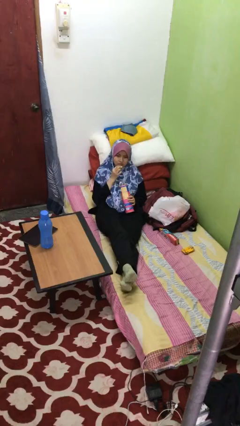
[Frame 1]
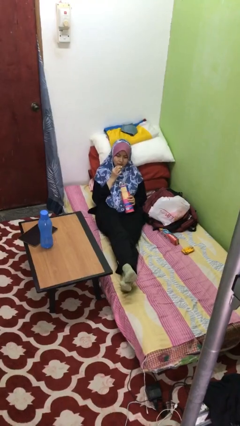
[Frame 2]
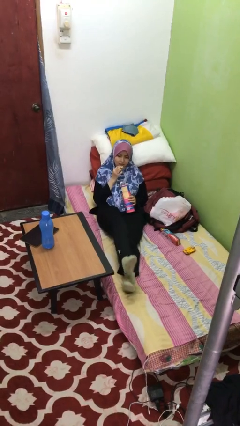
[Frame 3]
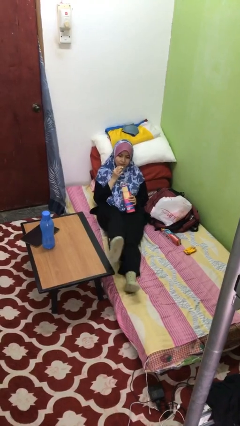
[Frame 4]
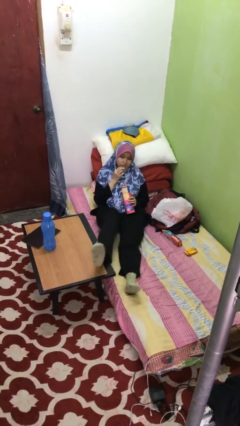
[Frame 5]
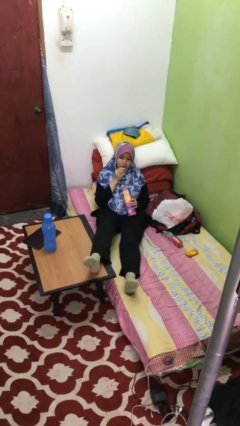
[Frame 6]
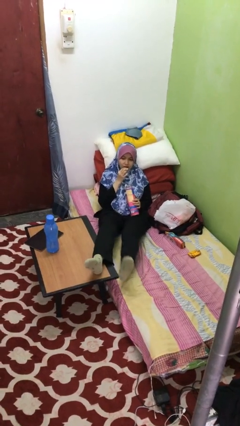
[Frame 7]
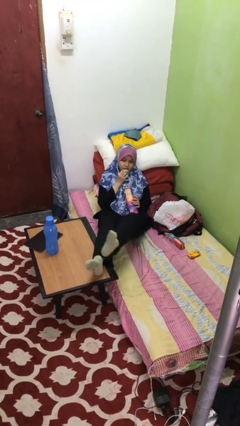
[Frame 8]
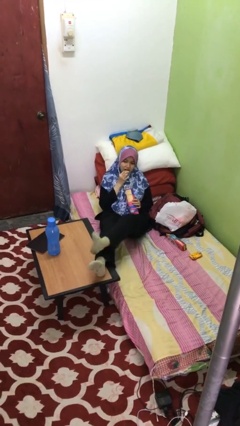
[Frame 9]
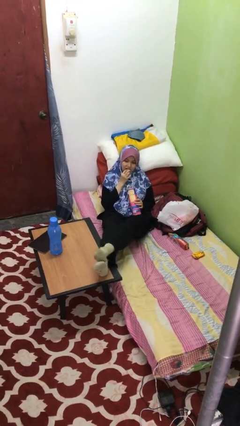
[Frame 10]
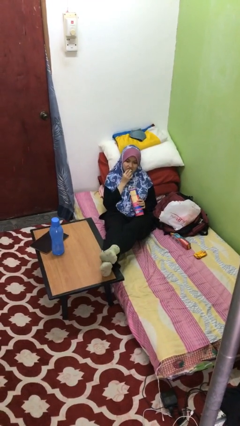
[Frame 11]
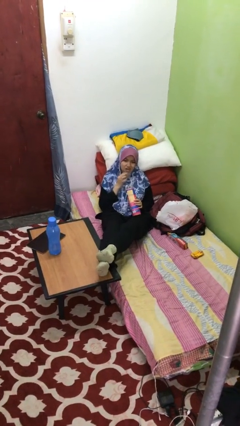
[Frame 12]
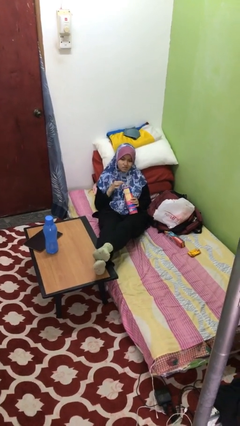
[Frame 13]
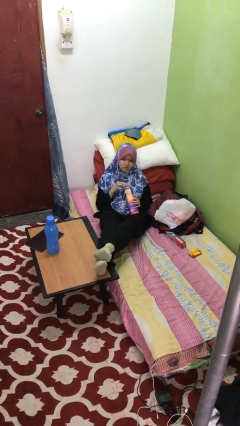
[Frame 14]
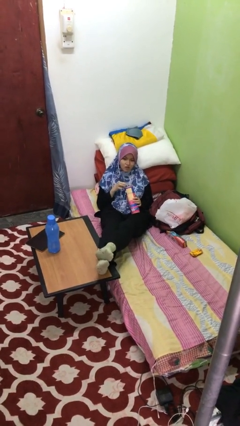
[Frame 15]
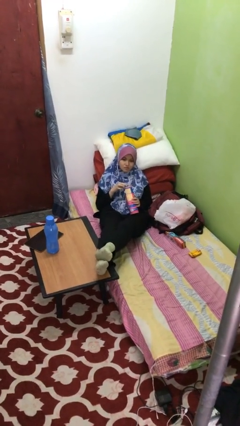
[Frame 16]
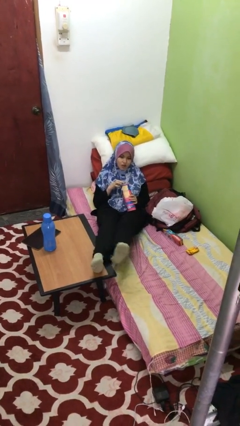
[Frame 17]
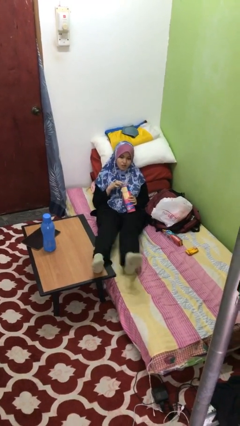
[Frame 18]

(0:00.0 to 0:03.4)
person puts feet up

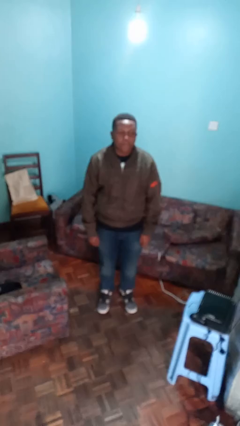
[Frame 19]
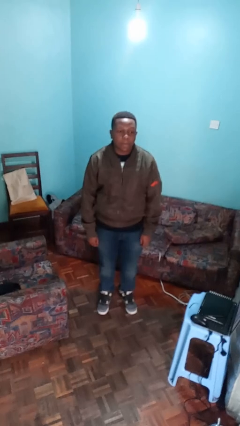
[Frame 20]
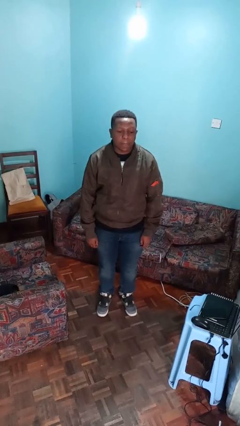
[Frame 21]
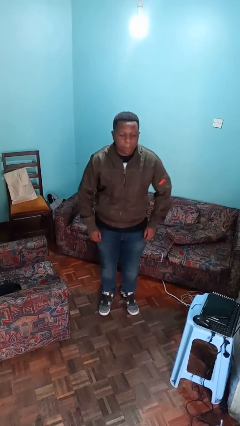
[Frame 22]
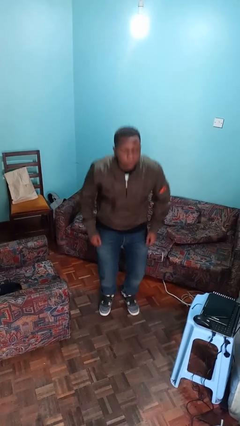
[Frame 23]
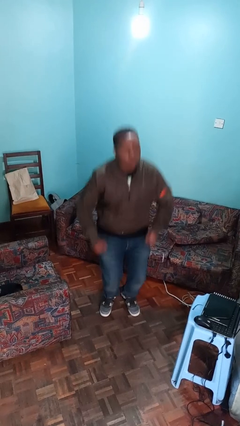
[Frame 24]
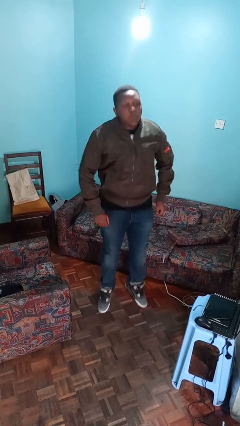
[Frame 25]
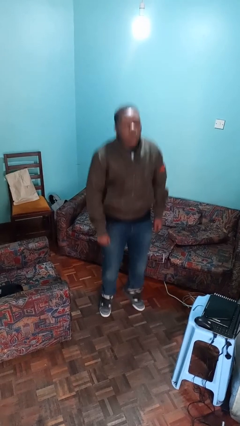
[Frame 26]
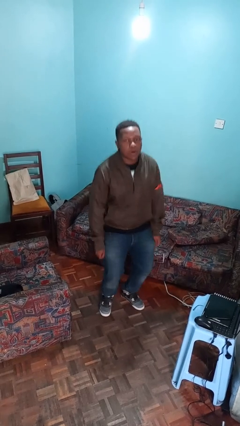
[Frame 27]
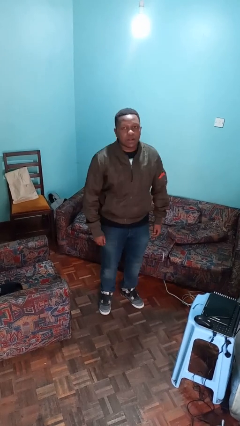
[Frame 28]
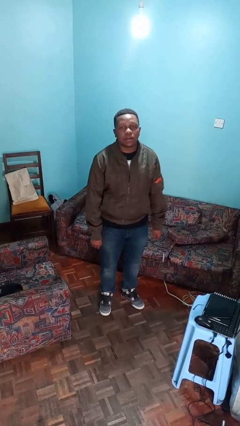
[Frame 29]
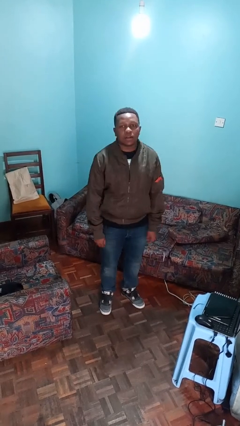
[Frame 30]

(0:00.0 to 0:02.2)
person jumps

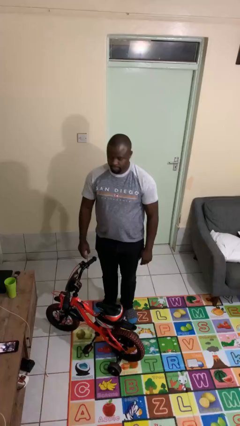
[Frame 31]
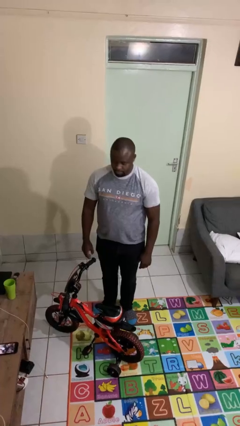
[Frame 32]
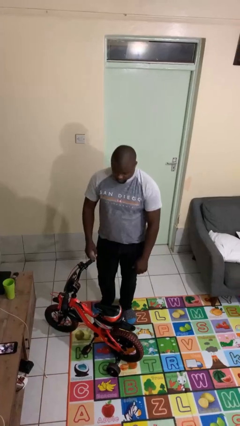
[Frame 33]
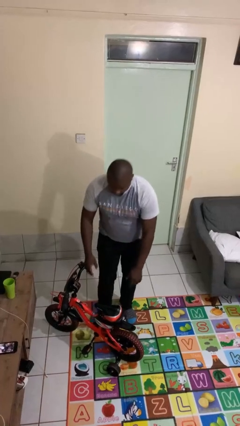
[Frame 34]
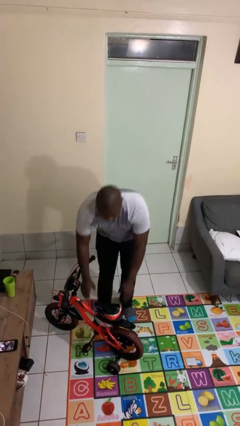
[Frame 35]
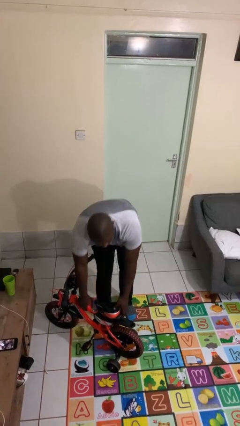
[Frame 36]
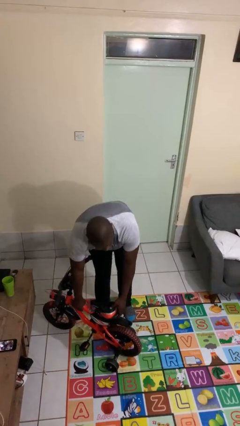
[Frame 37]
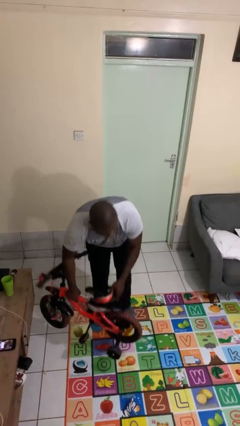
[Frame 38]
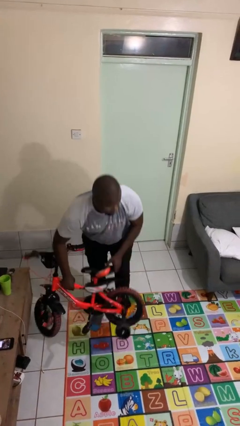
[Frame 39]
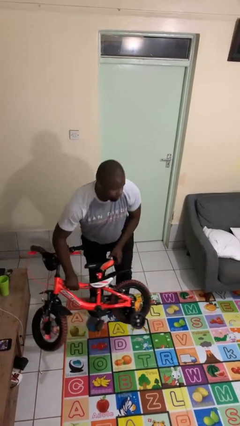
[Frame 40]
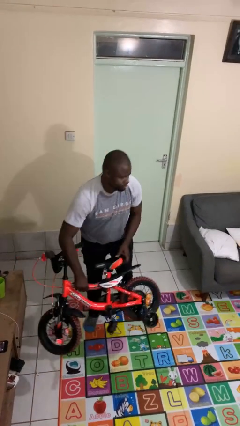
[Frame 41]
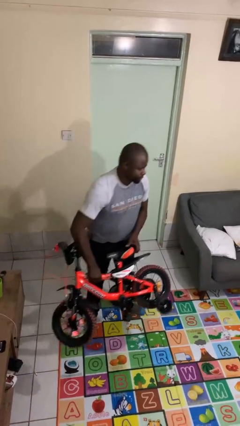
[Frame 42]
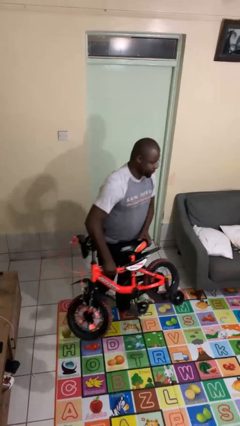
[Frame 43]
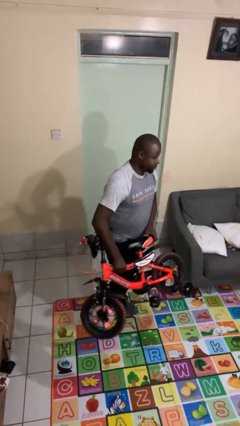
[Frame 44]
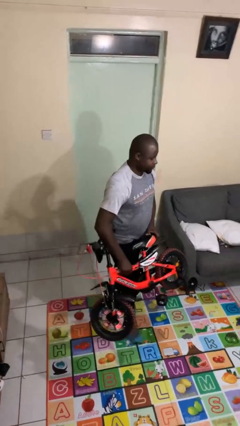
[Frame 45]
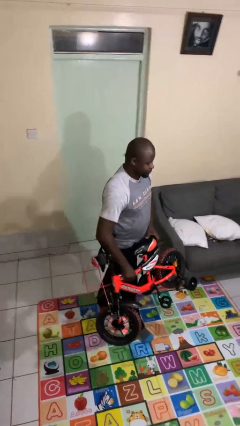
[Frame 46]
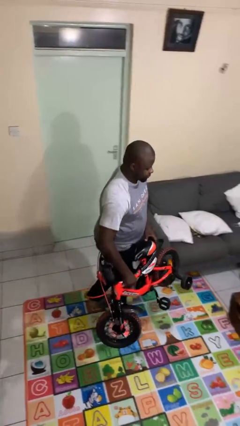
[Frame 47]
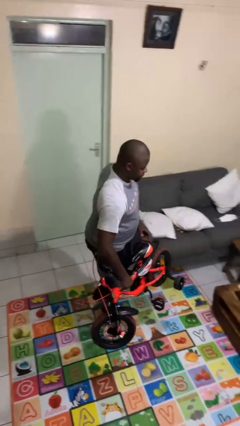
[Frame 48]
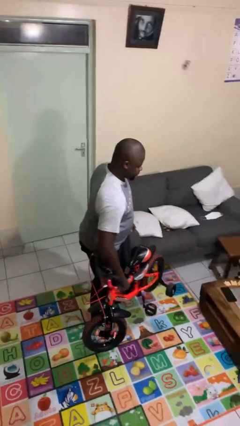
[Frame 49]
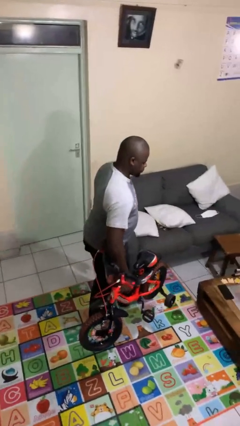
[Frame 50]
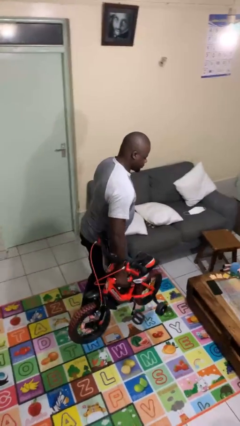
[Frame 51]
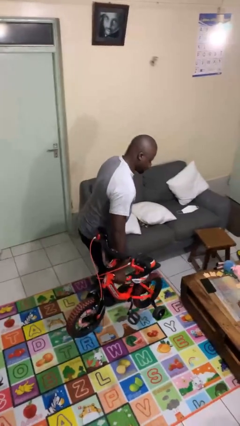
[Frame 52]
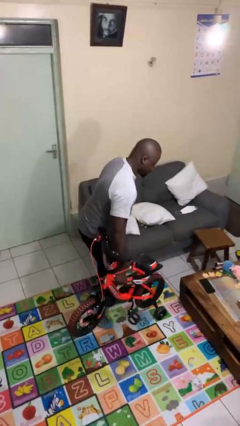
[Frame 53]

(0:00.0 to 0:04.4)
person carries bicycle

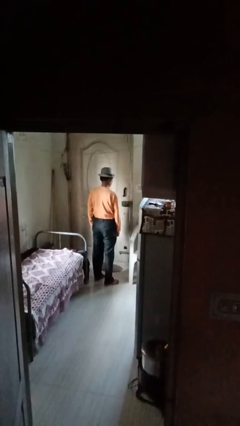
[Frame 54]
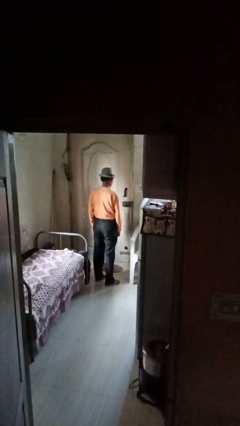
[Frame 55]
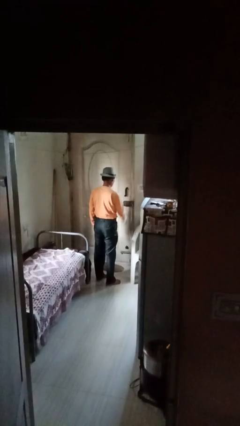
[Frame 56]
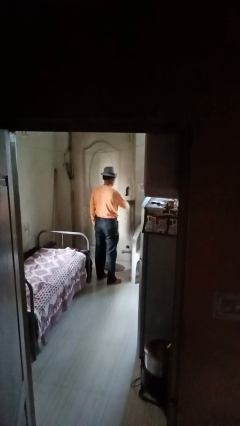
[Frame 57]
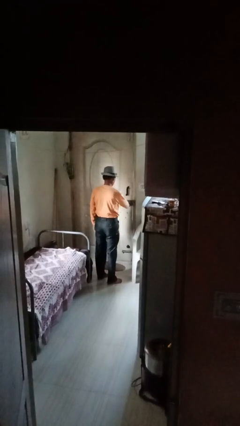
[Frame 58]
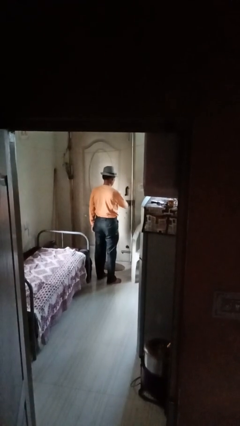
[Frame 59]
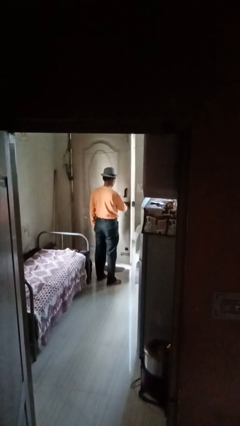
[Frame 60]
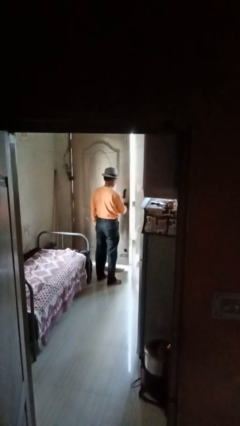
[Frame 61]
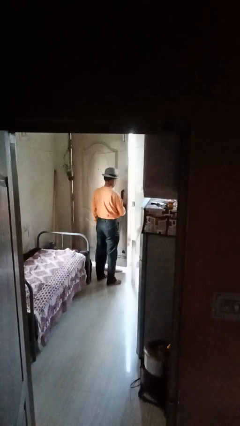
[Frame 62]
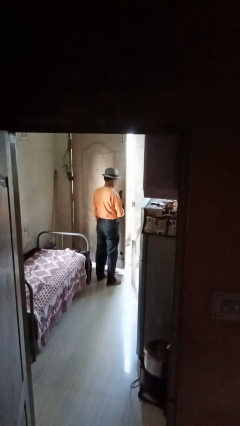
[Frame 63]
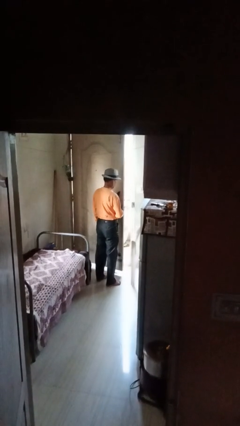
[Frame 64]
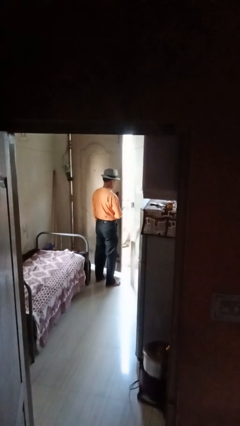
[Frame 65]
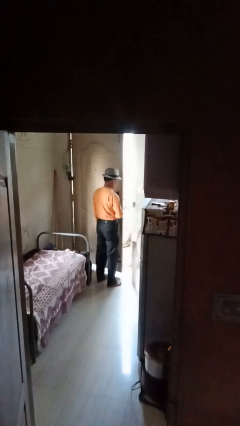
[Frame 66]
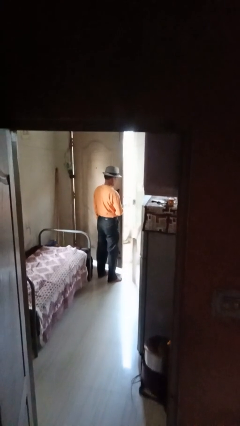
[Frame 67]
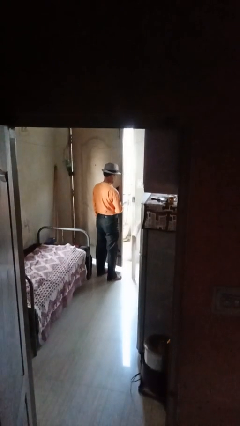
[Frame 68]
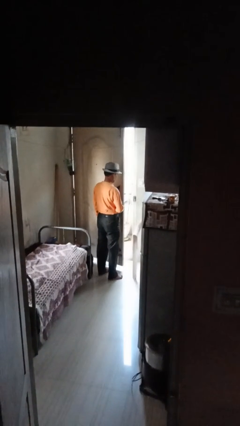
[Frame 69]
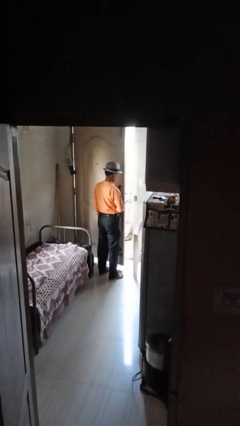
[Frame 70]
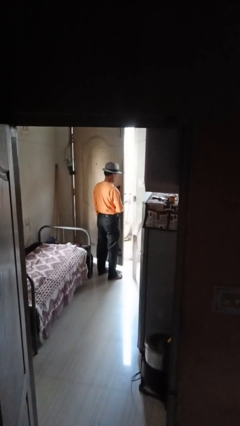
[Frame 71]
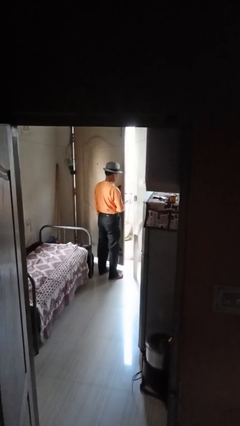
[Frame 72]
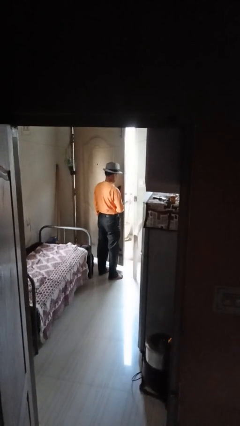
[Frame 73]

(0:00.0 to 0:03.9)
person opens facility door

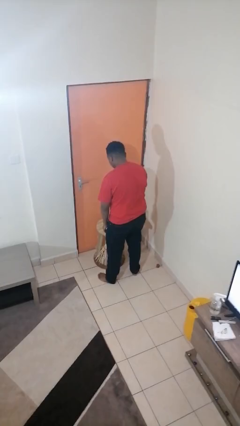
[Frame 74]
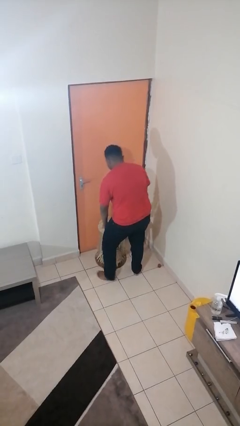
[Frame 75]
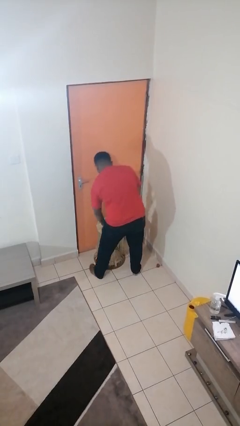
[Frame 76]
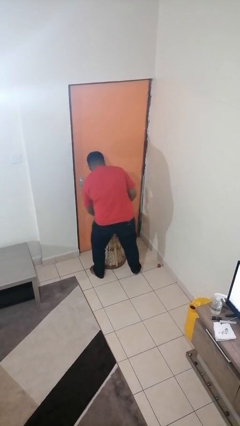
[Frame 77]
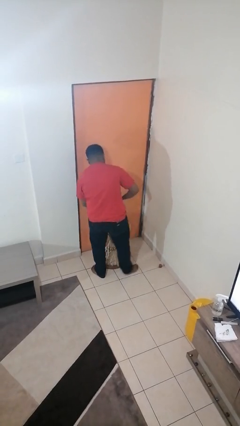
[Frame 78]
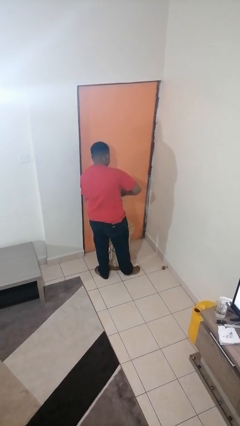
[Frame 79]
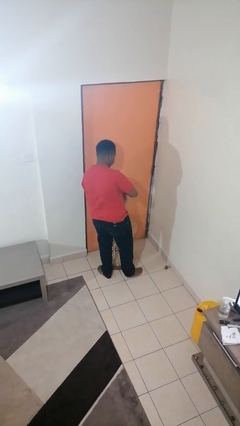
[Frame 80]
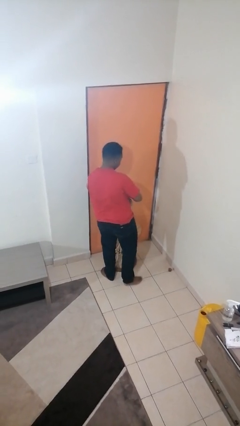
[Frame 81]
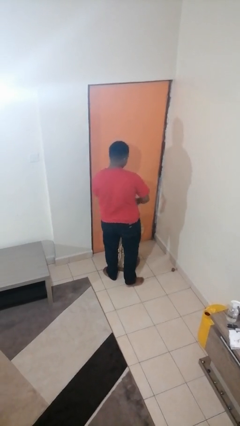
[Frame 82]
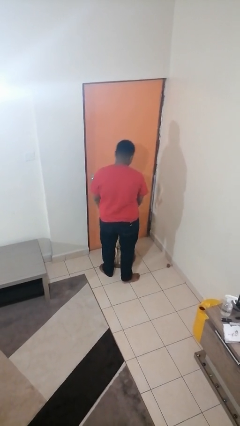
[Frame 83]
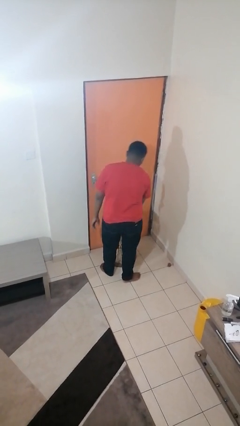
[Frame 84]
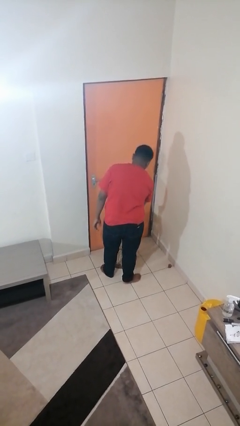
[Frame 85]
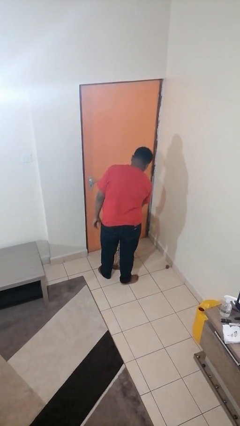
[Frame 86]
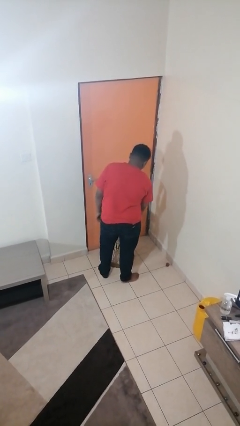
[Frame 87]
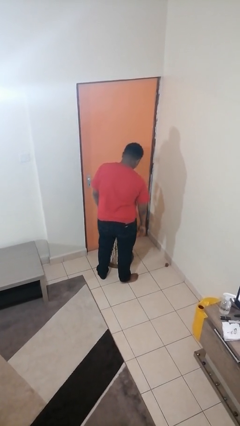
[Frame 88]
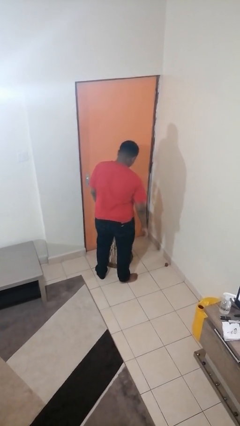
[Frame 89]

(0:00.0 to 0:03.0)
person closes jar

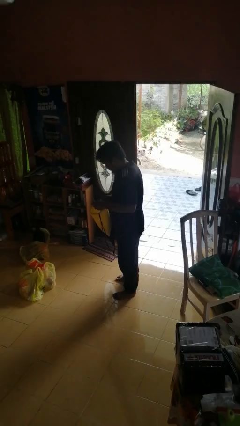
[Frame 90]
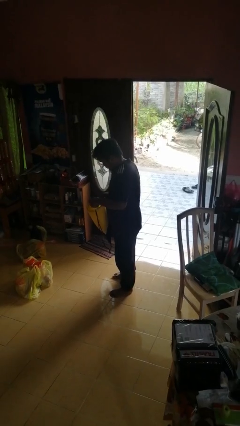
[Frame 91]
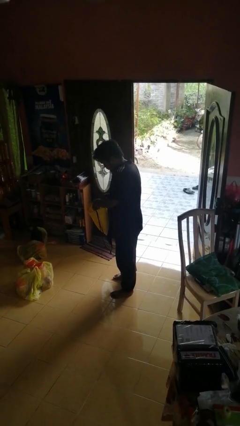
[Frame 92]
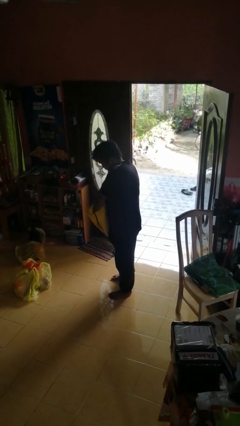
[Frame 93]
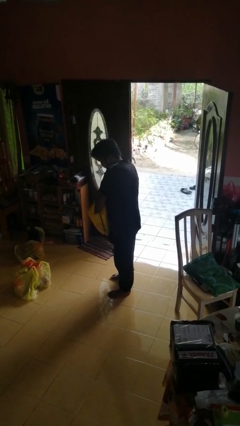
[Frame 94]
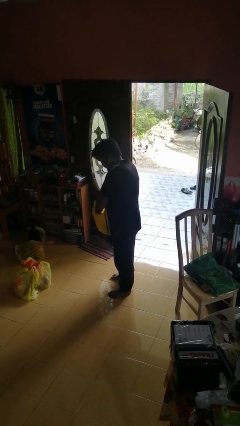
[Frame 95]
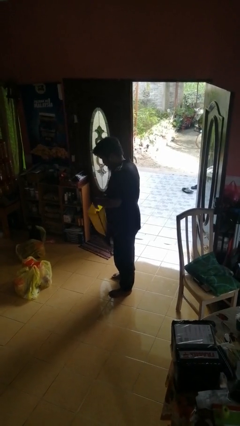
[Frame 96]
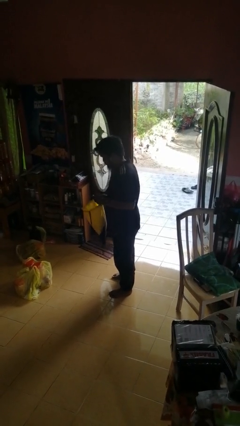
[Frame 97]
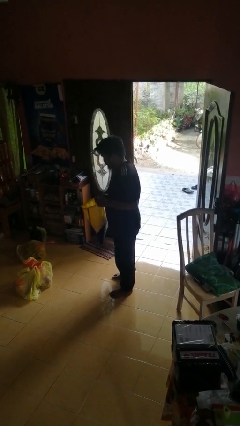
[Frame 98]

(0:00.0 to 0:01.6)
person puts object into bag
